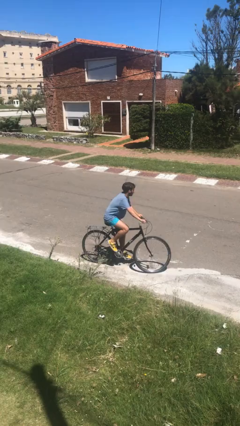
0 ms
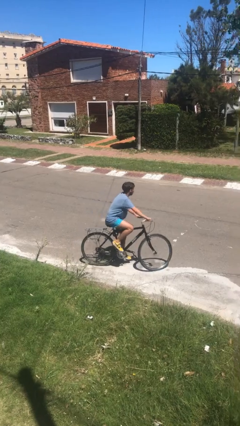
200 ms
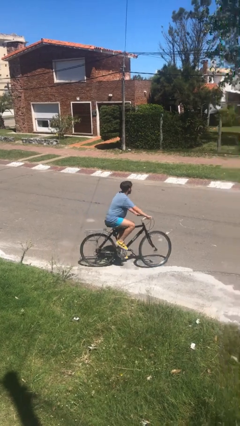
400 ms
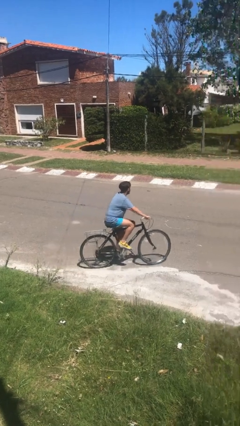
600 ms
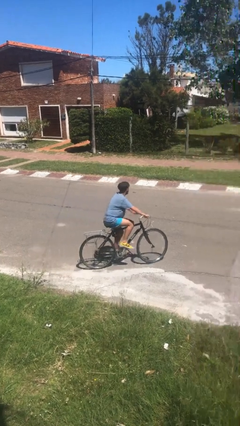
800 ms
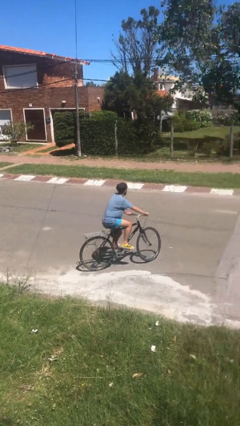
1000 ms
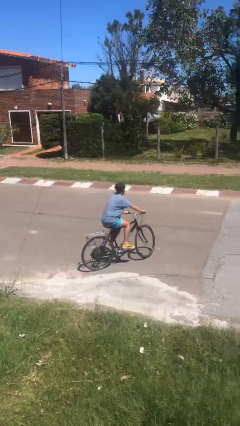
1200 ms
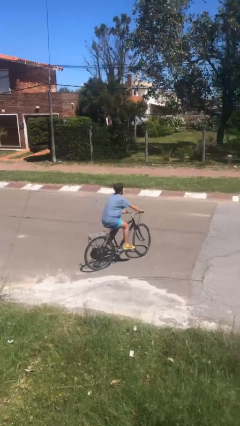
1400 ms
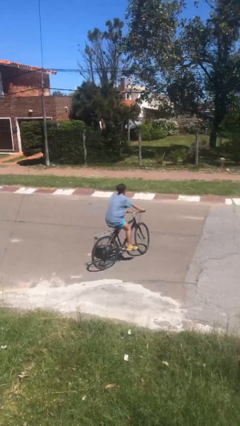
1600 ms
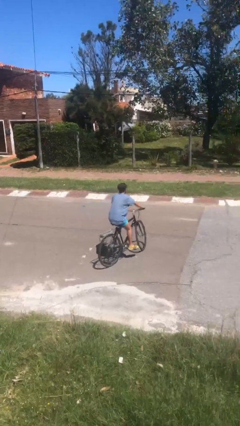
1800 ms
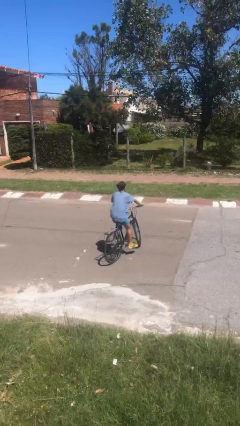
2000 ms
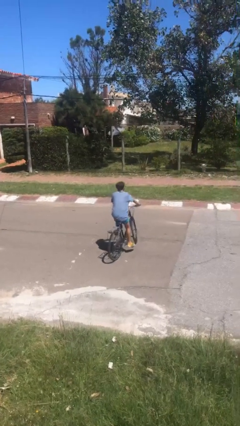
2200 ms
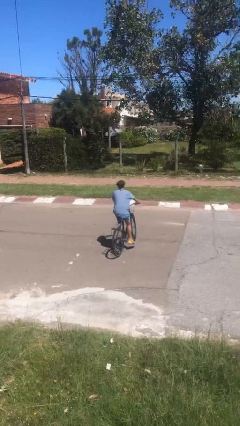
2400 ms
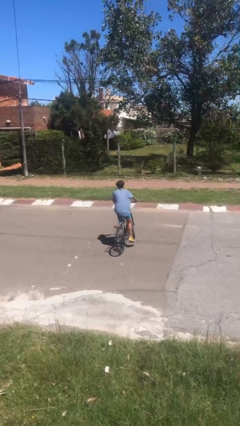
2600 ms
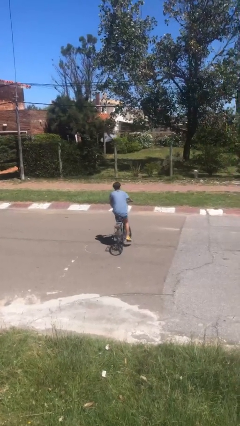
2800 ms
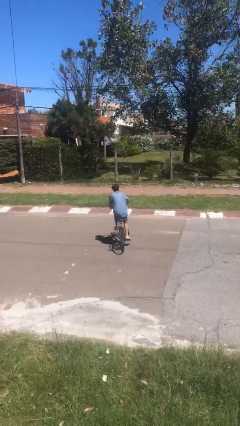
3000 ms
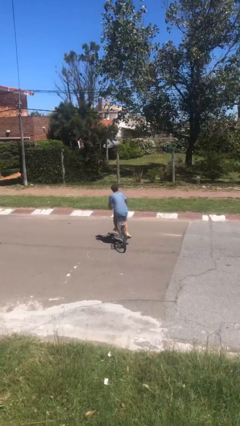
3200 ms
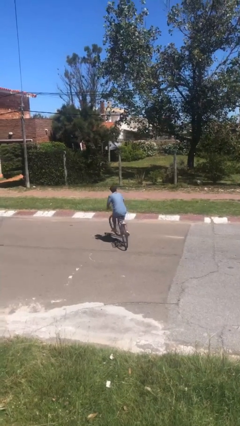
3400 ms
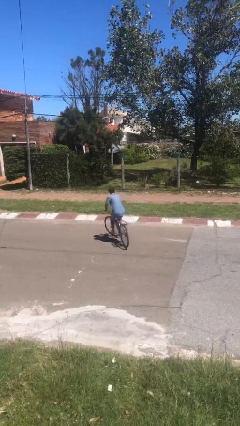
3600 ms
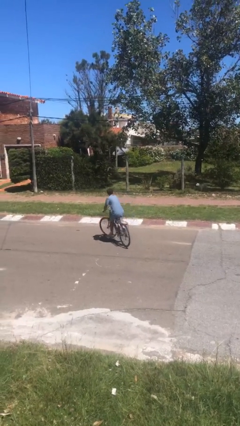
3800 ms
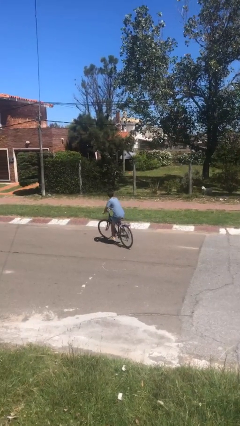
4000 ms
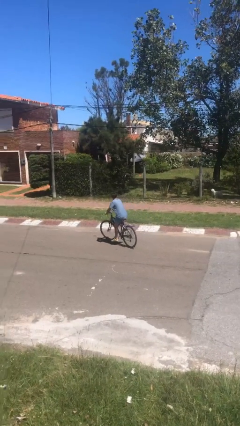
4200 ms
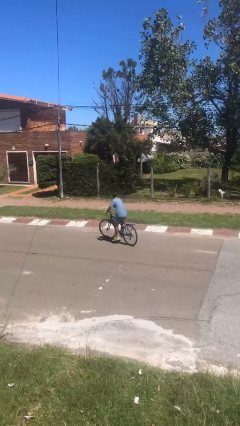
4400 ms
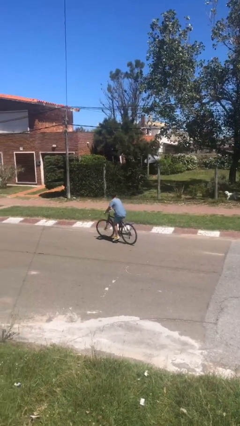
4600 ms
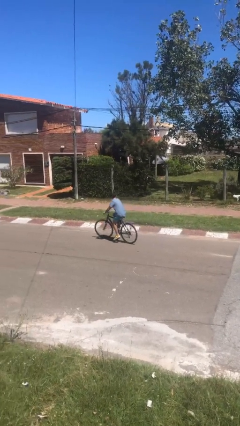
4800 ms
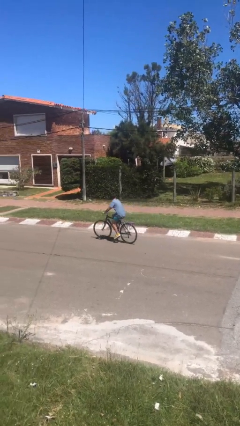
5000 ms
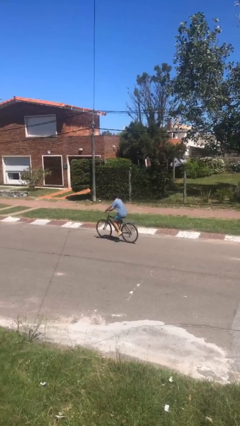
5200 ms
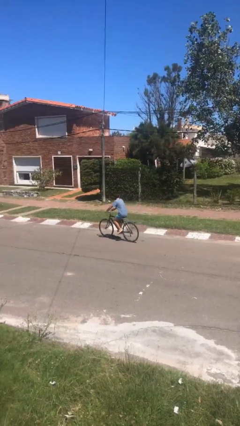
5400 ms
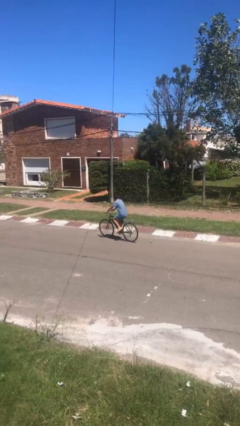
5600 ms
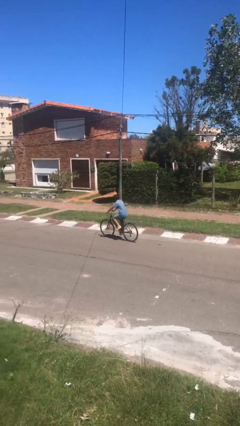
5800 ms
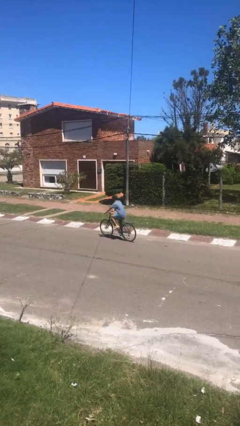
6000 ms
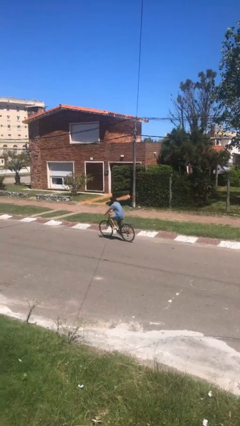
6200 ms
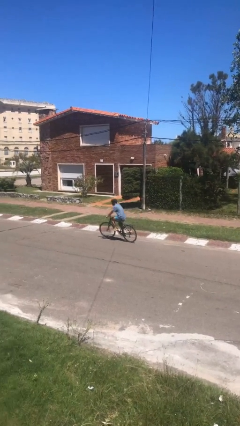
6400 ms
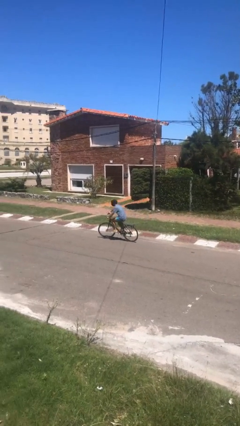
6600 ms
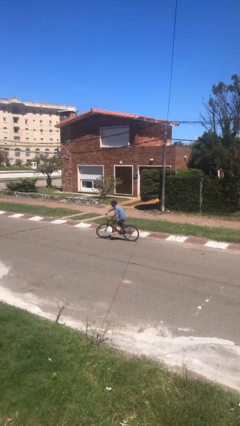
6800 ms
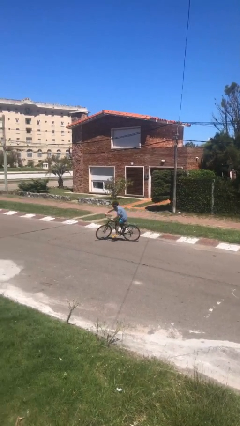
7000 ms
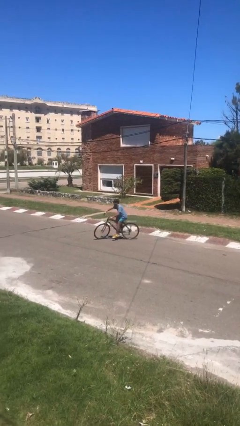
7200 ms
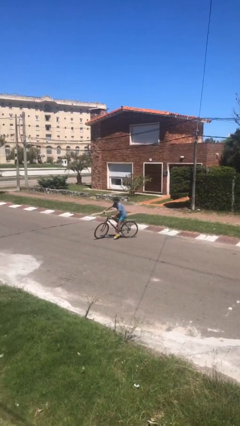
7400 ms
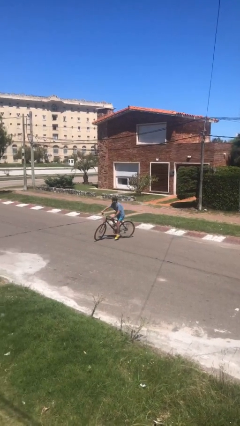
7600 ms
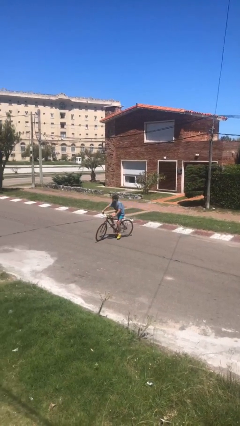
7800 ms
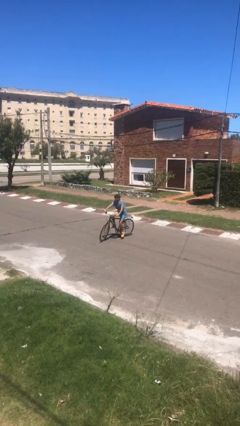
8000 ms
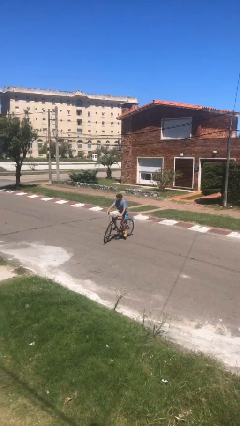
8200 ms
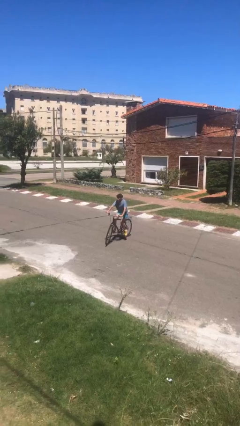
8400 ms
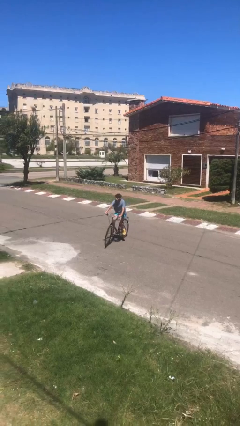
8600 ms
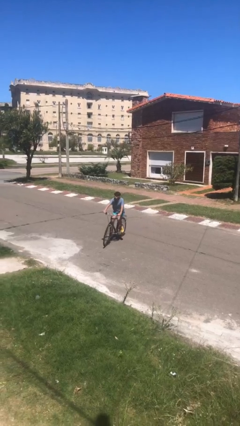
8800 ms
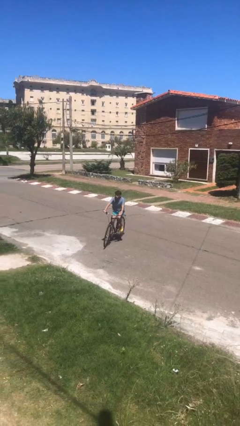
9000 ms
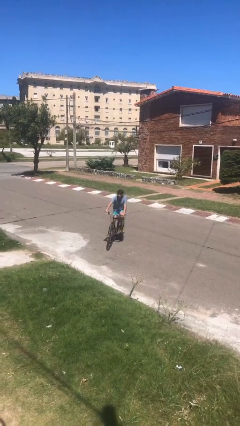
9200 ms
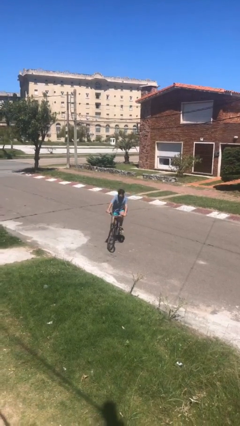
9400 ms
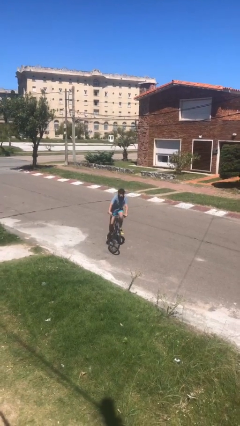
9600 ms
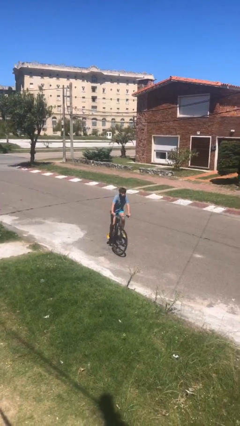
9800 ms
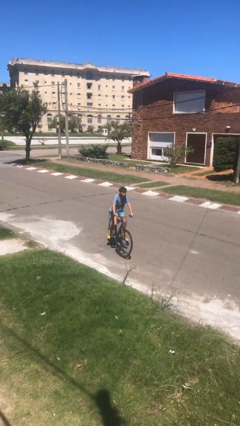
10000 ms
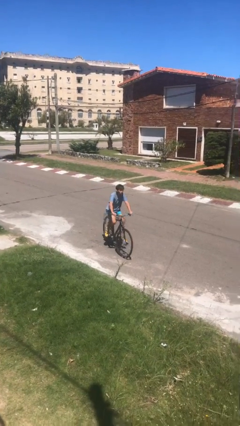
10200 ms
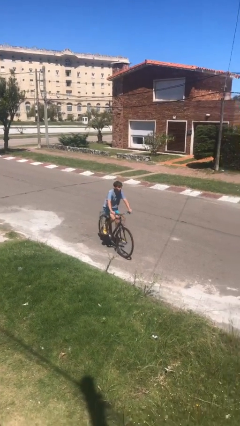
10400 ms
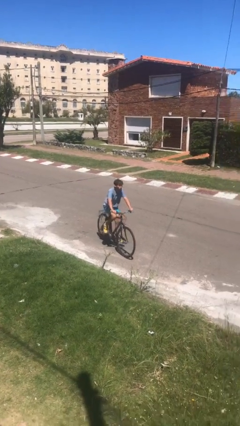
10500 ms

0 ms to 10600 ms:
person rides bicycle

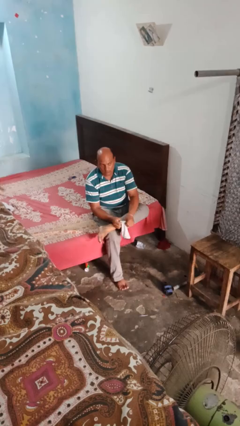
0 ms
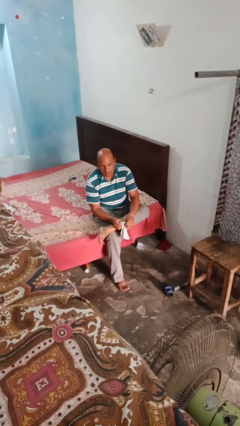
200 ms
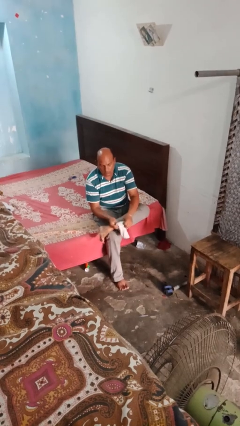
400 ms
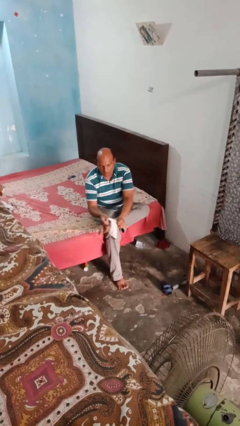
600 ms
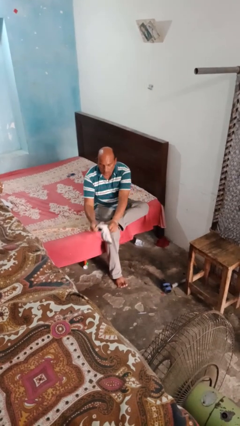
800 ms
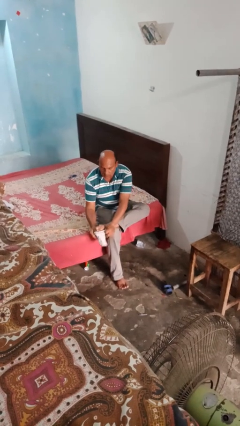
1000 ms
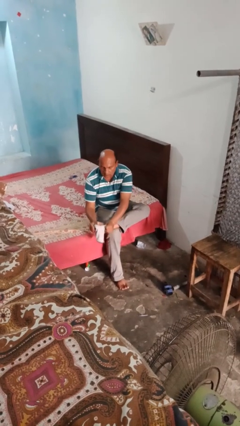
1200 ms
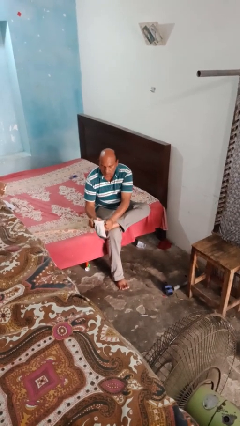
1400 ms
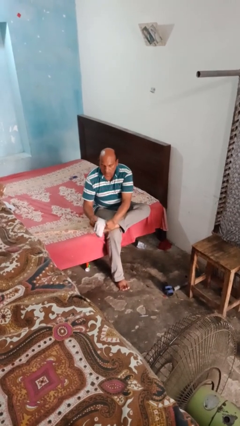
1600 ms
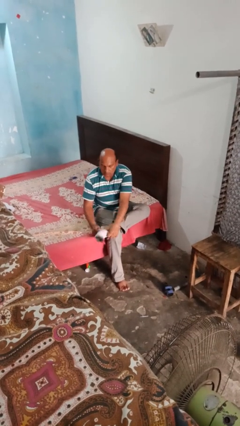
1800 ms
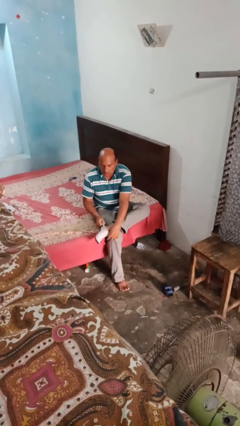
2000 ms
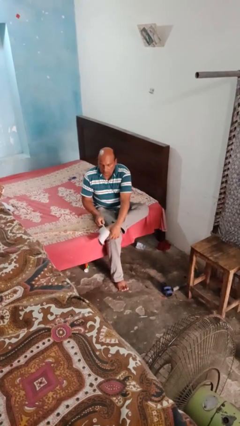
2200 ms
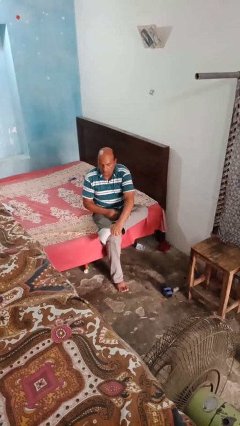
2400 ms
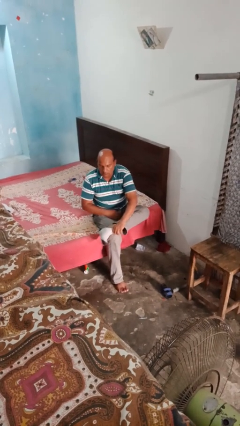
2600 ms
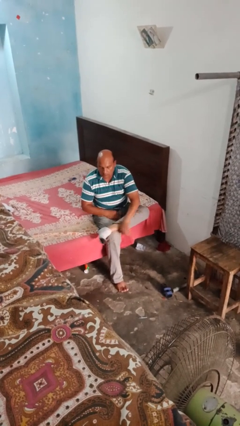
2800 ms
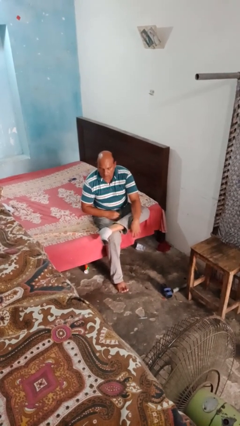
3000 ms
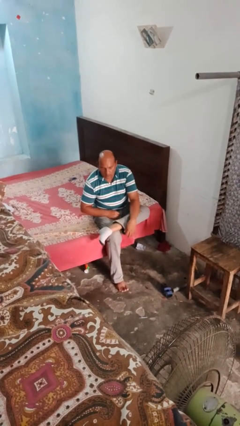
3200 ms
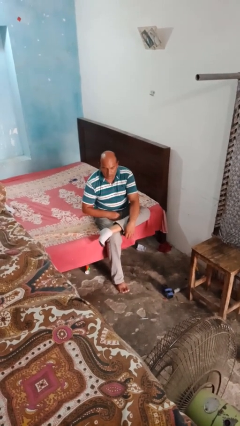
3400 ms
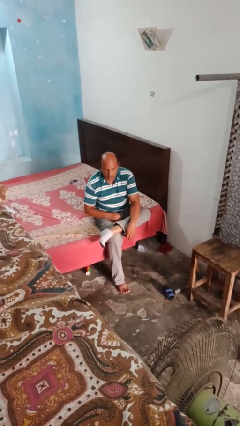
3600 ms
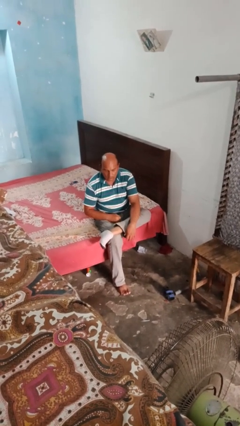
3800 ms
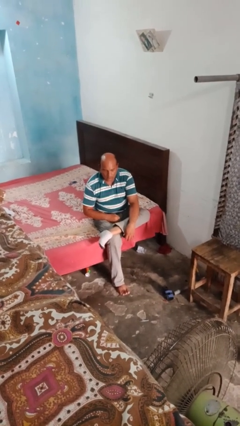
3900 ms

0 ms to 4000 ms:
person puts on socks

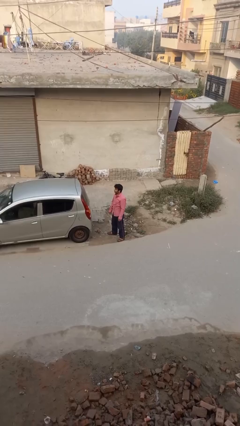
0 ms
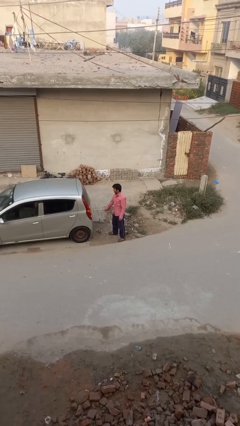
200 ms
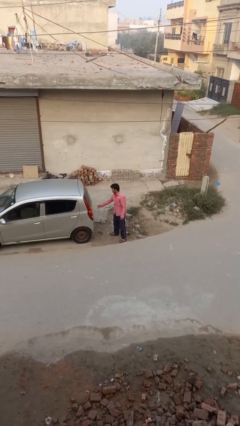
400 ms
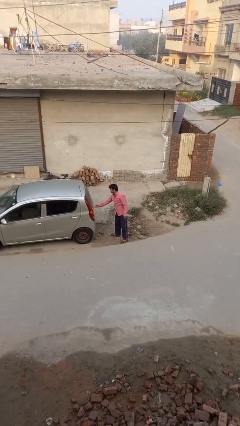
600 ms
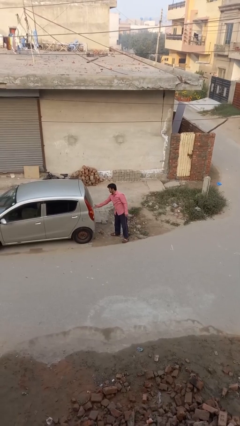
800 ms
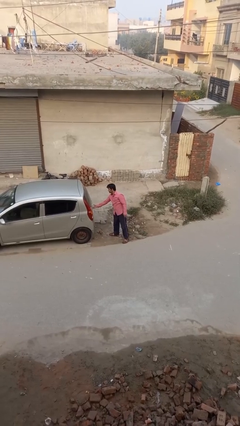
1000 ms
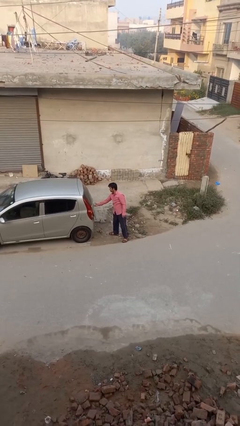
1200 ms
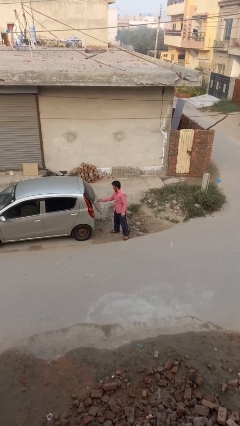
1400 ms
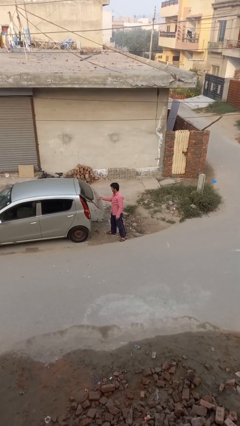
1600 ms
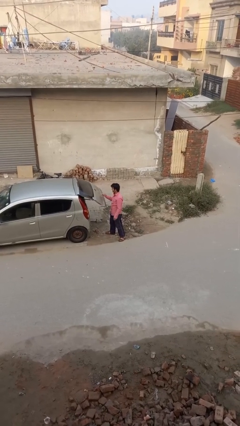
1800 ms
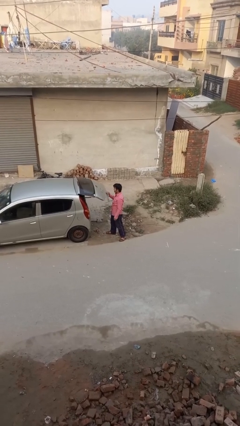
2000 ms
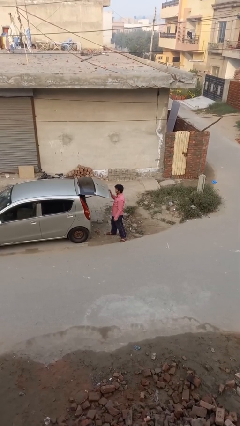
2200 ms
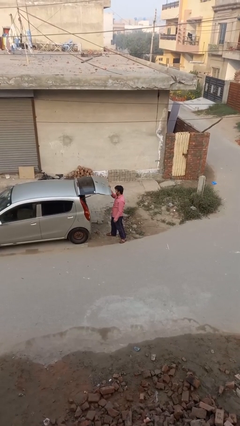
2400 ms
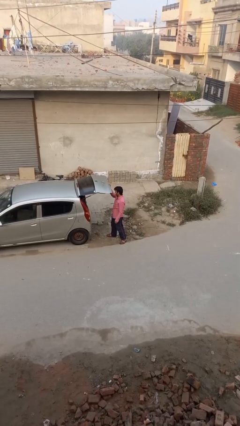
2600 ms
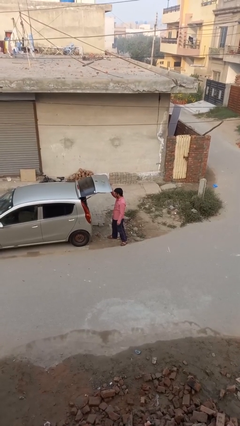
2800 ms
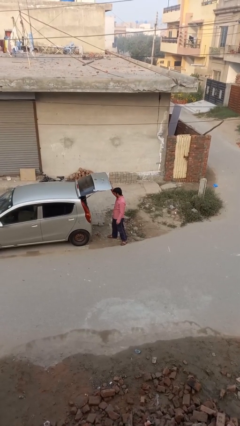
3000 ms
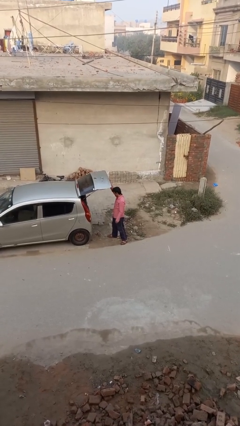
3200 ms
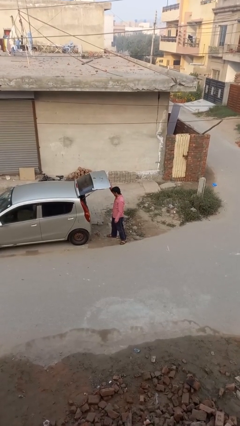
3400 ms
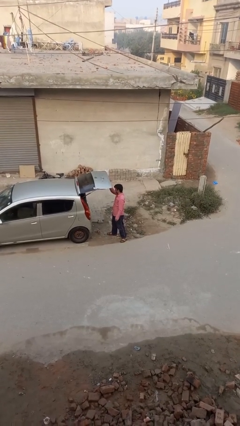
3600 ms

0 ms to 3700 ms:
person opens car trunk
